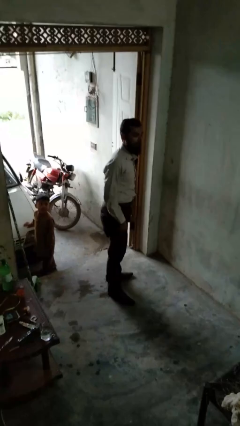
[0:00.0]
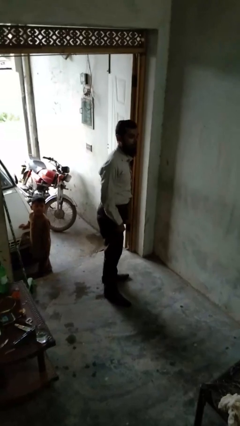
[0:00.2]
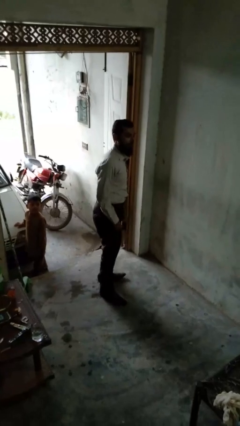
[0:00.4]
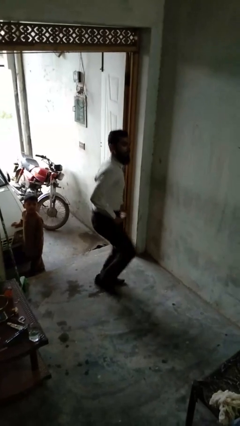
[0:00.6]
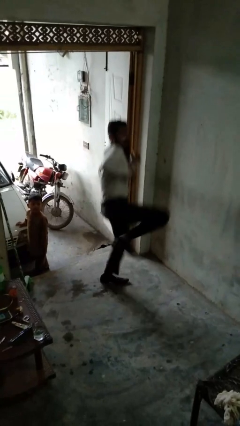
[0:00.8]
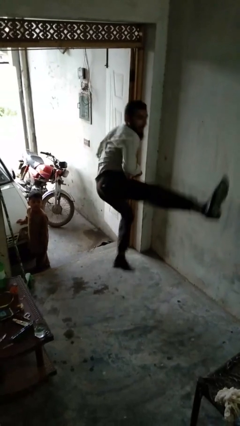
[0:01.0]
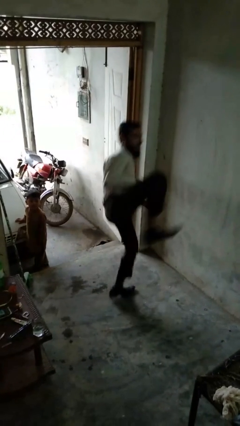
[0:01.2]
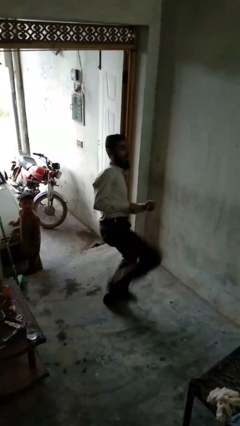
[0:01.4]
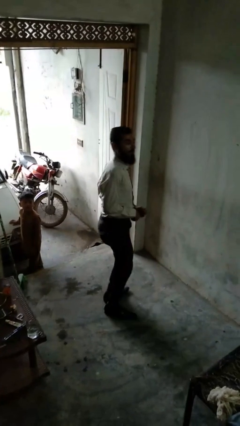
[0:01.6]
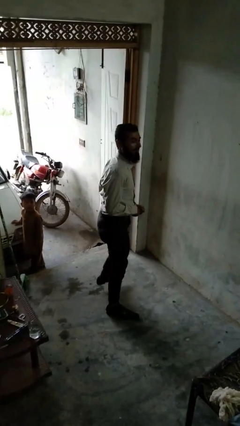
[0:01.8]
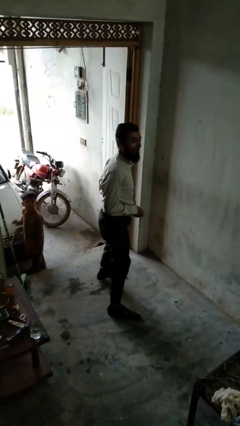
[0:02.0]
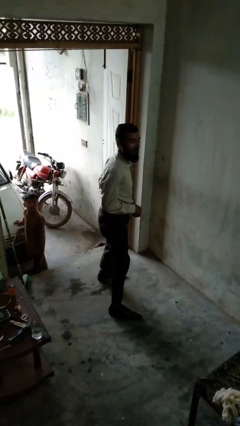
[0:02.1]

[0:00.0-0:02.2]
person karate kicks

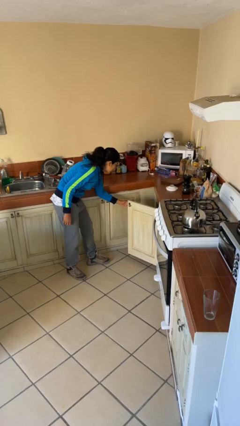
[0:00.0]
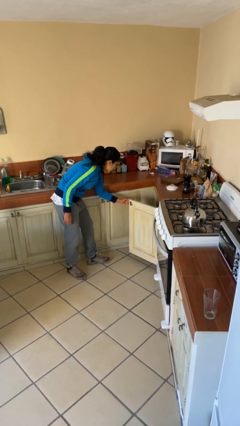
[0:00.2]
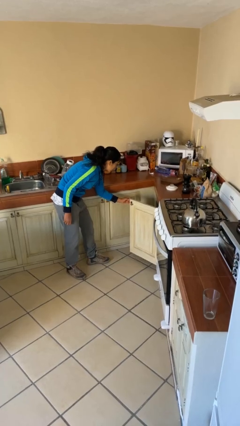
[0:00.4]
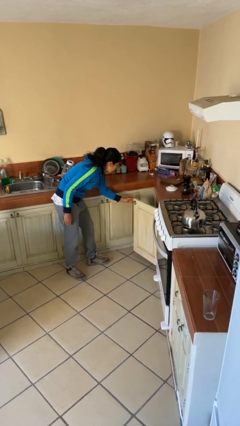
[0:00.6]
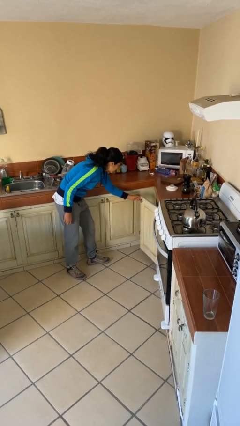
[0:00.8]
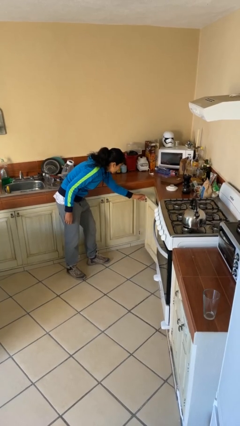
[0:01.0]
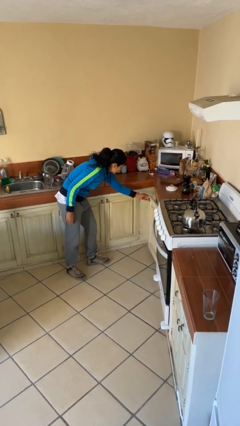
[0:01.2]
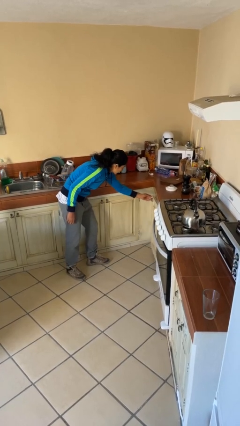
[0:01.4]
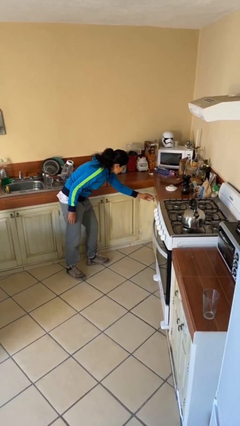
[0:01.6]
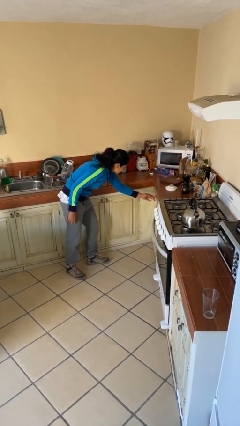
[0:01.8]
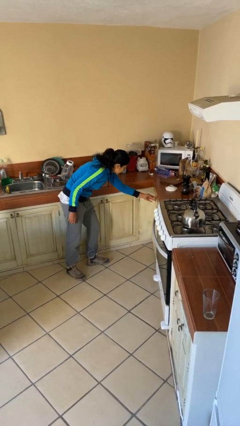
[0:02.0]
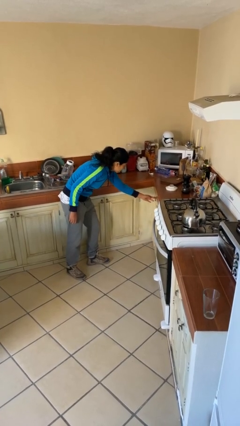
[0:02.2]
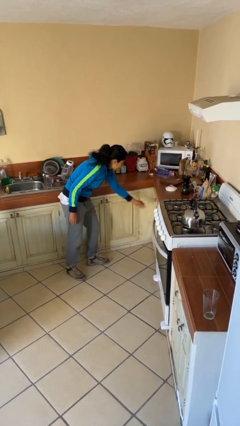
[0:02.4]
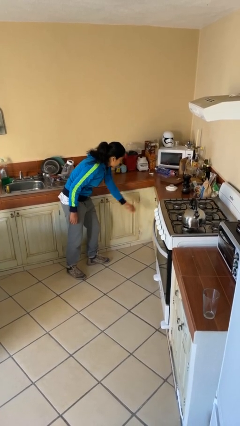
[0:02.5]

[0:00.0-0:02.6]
person closes cabinet

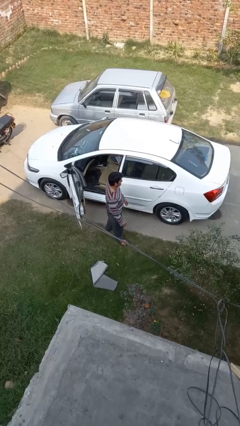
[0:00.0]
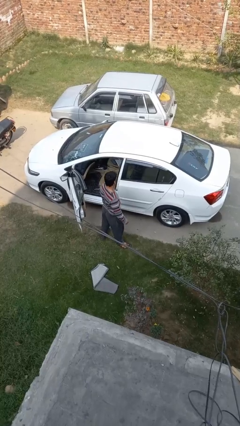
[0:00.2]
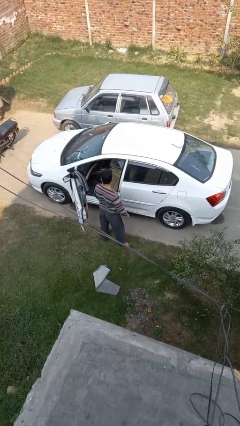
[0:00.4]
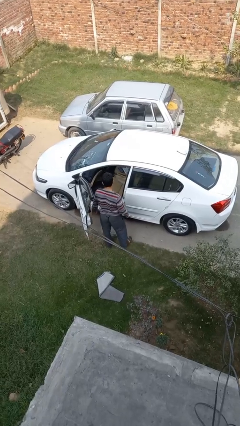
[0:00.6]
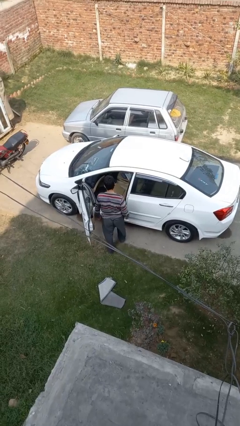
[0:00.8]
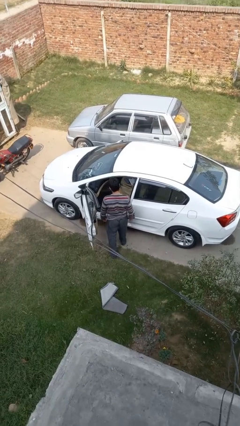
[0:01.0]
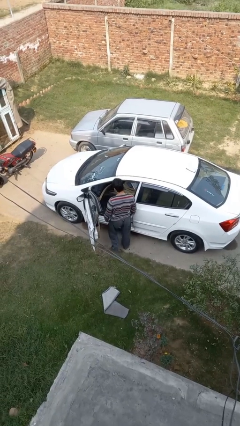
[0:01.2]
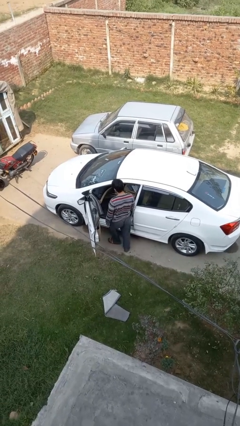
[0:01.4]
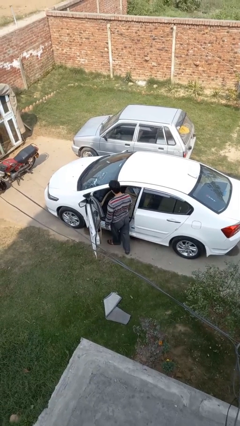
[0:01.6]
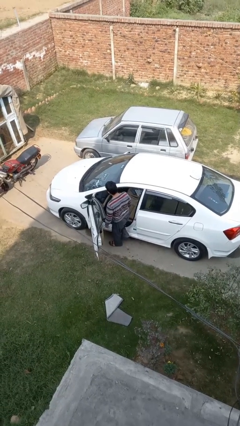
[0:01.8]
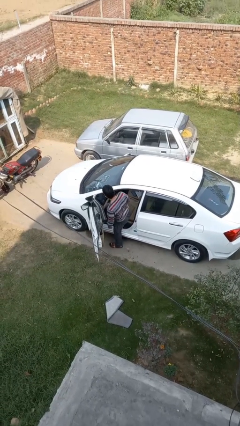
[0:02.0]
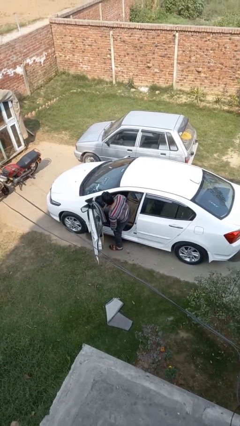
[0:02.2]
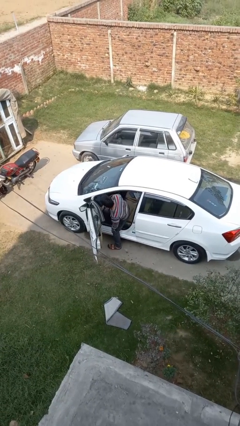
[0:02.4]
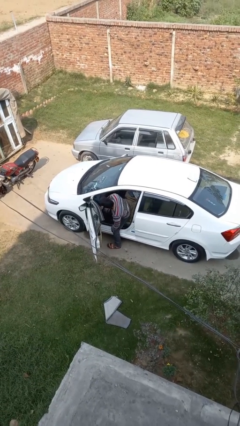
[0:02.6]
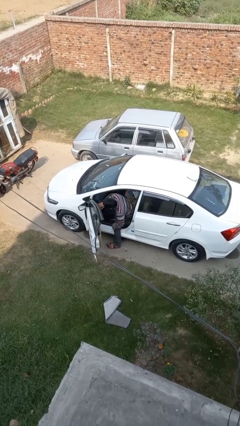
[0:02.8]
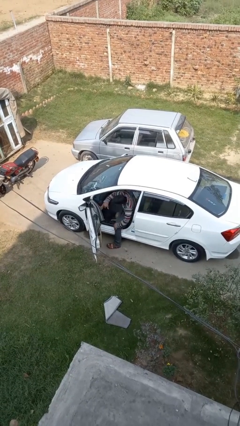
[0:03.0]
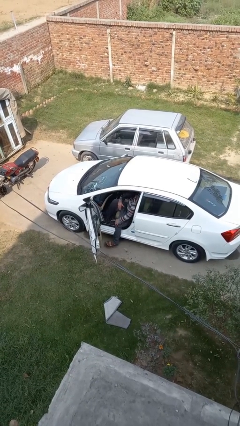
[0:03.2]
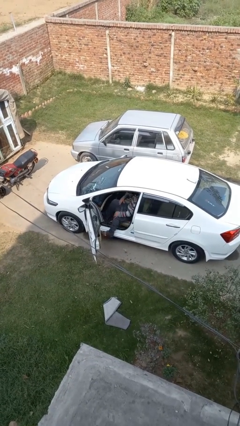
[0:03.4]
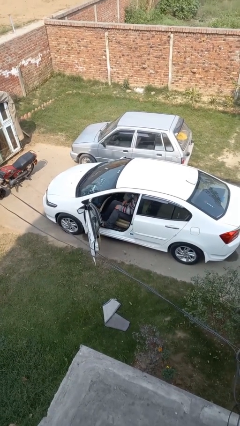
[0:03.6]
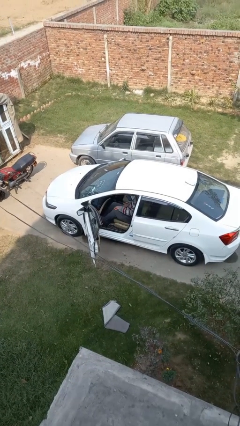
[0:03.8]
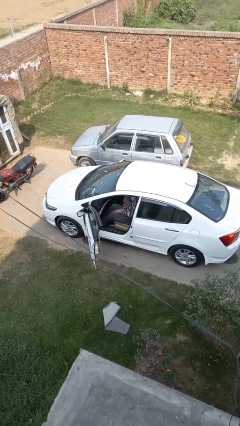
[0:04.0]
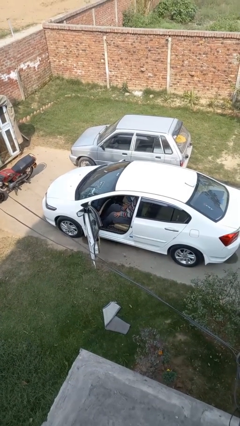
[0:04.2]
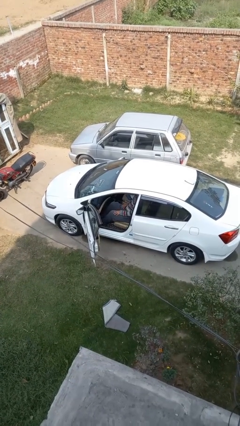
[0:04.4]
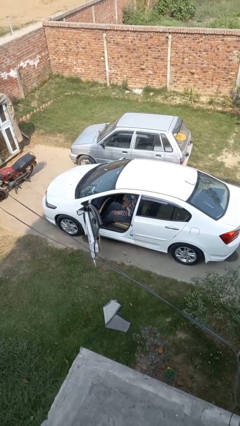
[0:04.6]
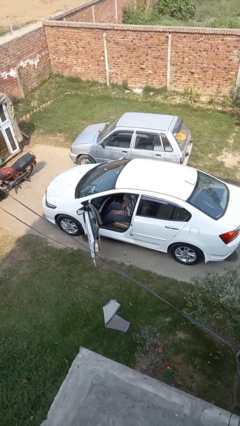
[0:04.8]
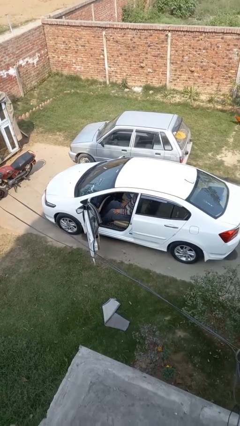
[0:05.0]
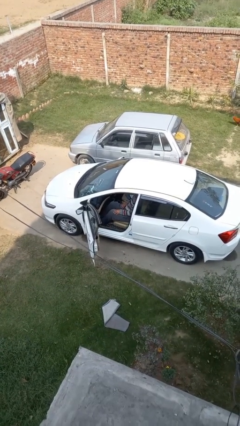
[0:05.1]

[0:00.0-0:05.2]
person enters car

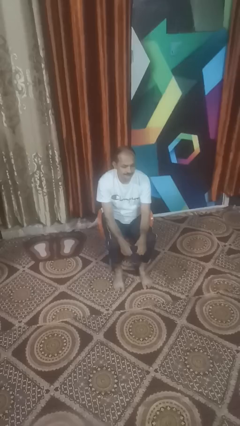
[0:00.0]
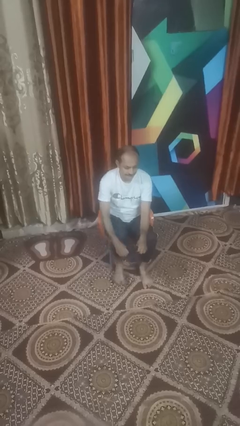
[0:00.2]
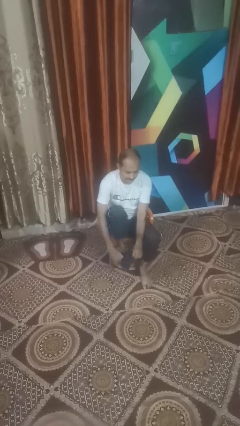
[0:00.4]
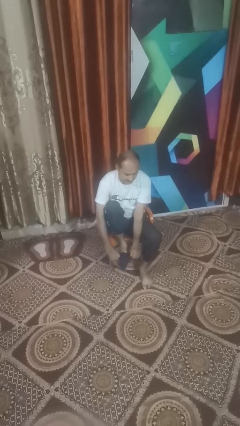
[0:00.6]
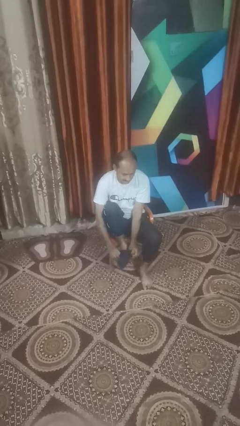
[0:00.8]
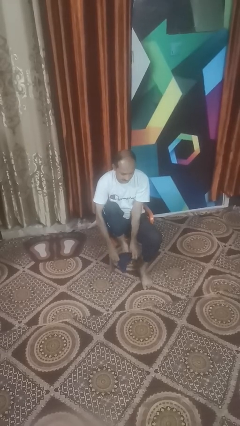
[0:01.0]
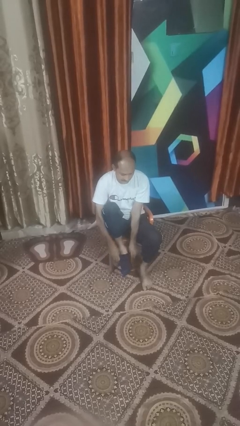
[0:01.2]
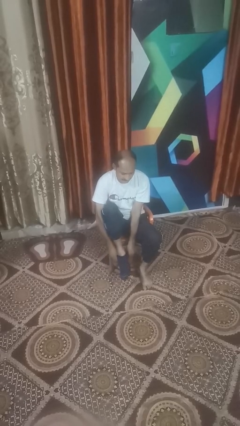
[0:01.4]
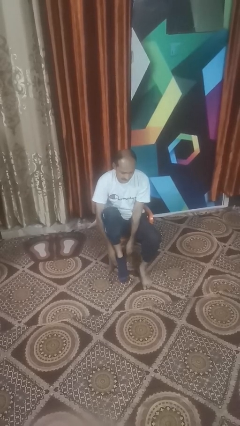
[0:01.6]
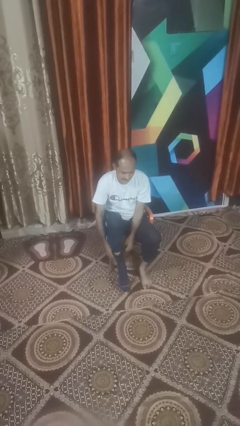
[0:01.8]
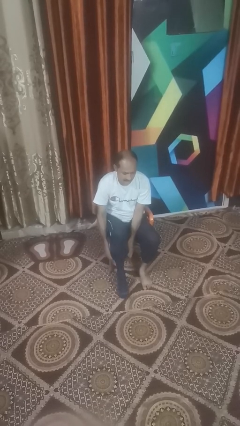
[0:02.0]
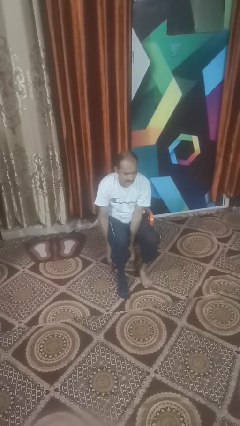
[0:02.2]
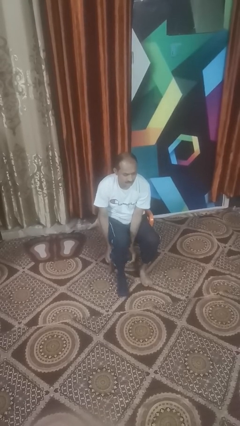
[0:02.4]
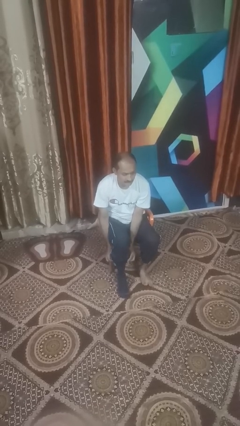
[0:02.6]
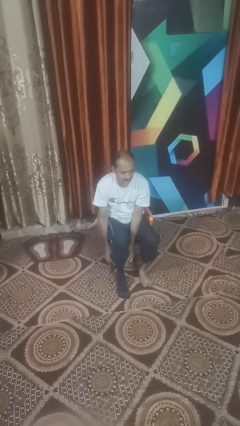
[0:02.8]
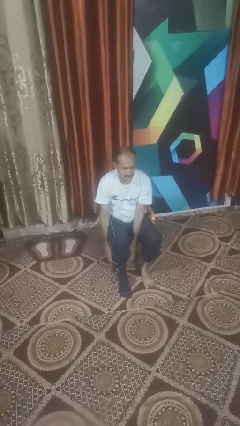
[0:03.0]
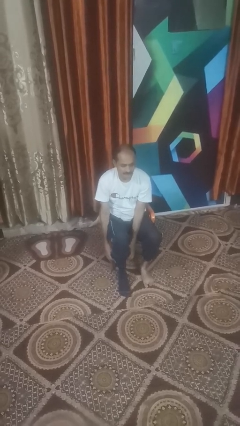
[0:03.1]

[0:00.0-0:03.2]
person puts on socks

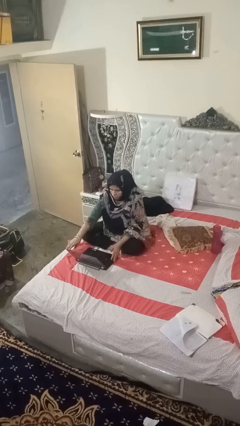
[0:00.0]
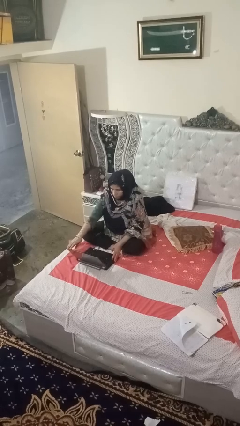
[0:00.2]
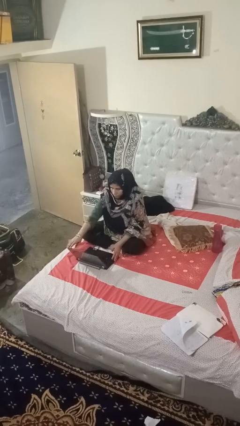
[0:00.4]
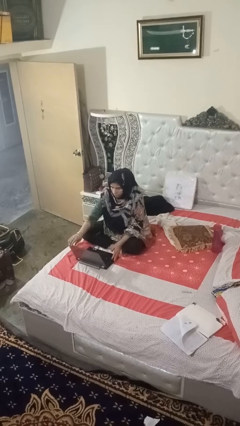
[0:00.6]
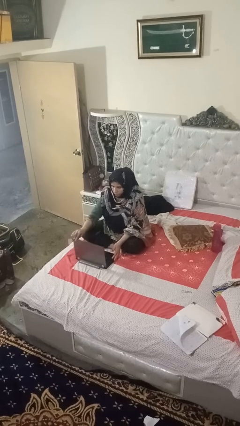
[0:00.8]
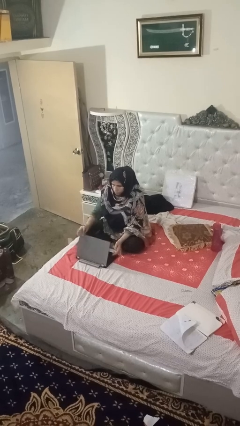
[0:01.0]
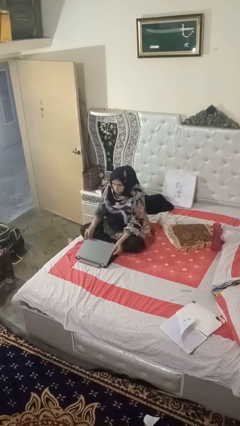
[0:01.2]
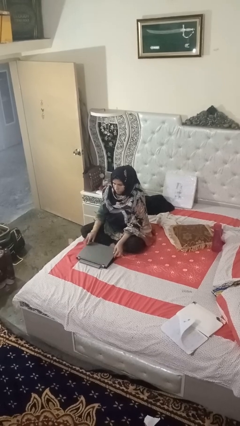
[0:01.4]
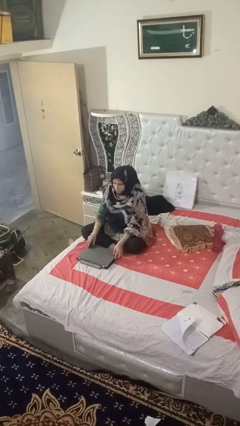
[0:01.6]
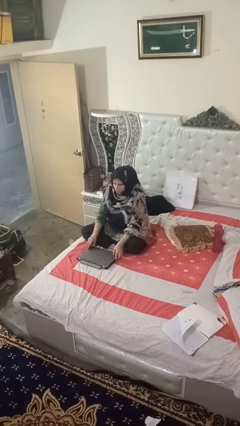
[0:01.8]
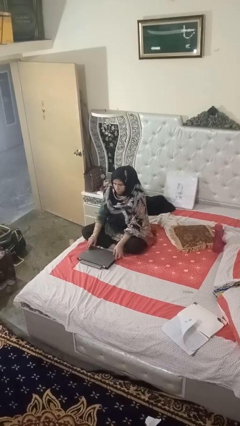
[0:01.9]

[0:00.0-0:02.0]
person closes laptop

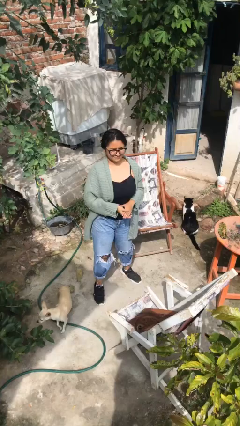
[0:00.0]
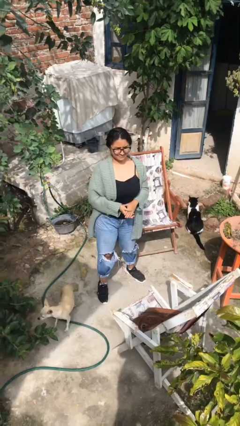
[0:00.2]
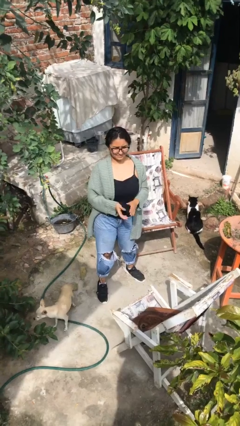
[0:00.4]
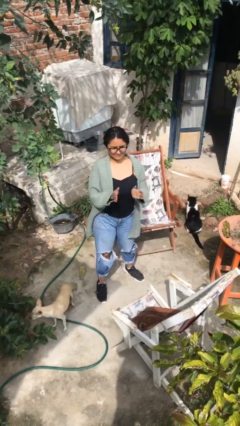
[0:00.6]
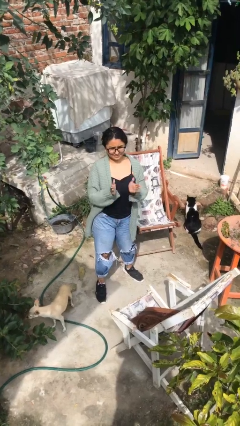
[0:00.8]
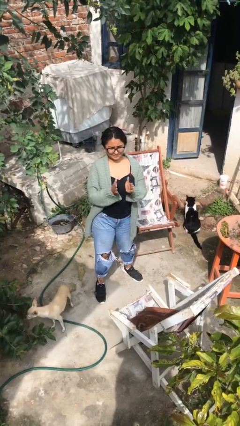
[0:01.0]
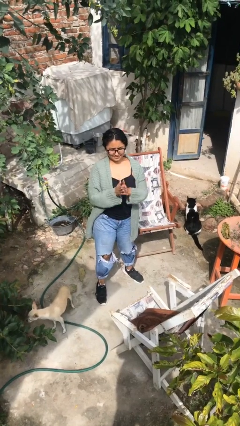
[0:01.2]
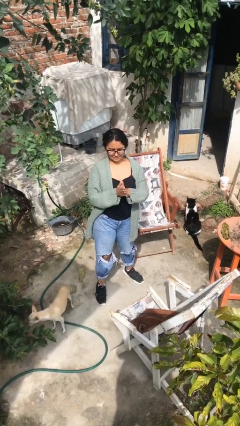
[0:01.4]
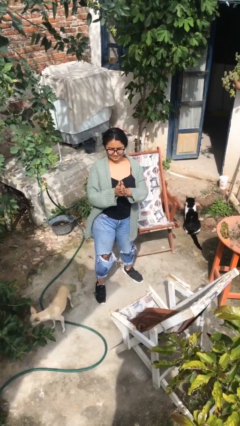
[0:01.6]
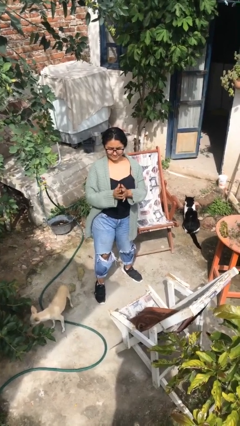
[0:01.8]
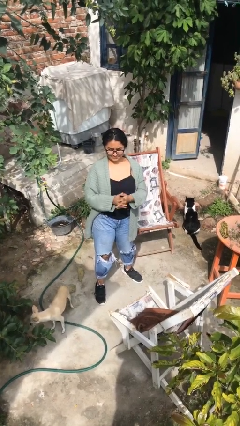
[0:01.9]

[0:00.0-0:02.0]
person claps hands

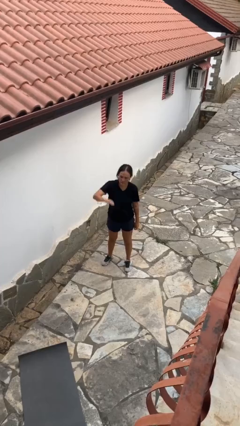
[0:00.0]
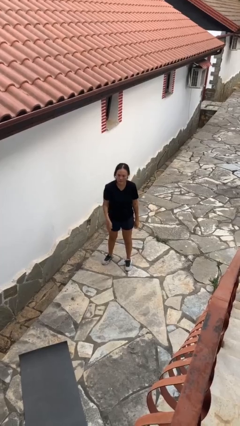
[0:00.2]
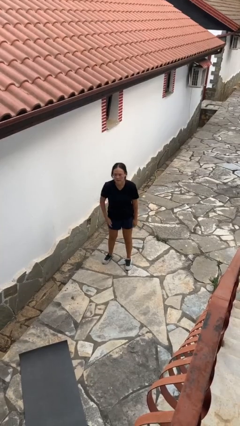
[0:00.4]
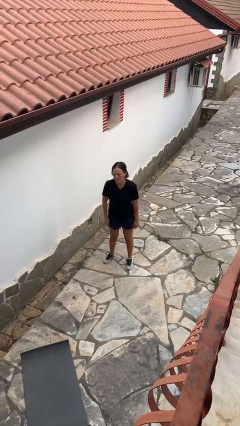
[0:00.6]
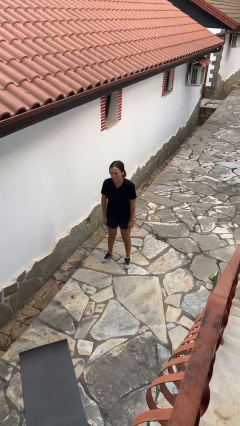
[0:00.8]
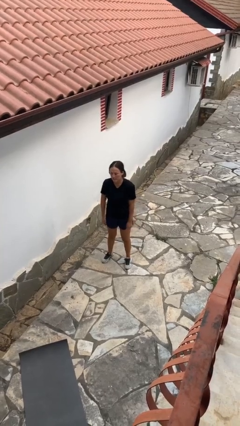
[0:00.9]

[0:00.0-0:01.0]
person gestures swipe down
